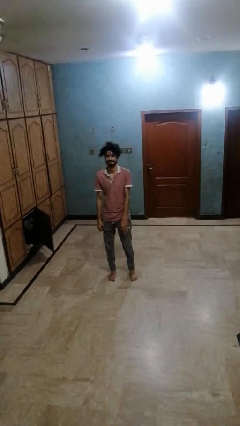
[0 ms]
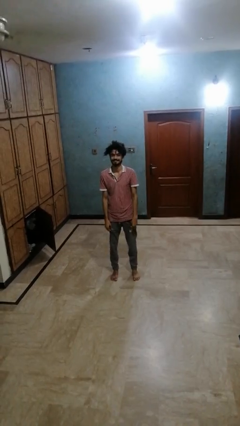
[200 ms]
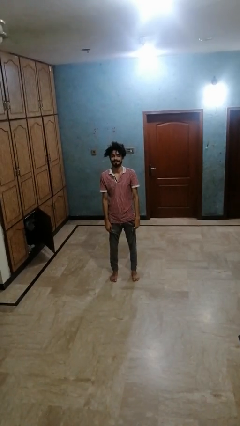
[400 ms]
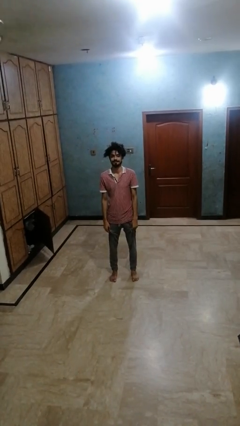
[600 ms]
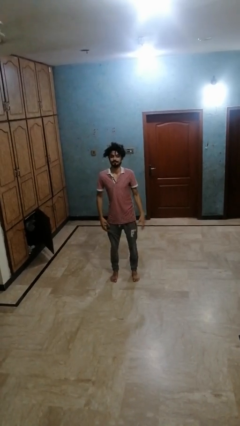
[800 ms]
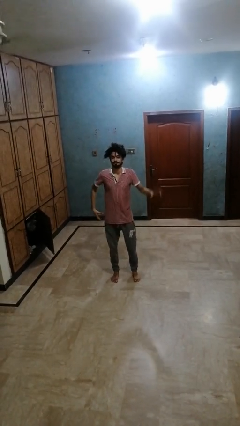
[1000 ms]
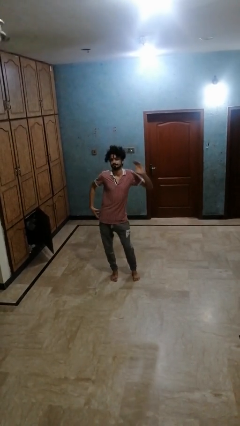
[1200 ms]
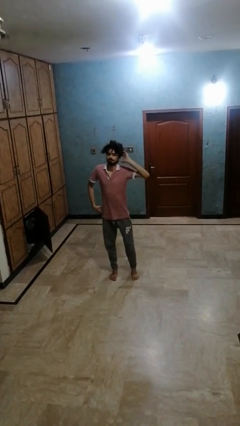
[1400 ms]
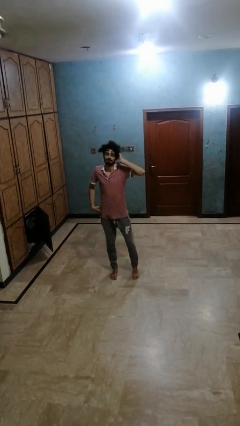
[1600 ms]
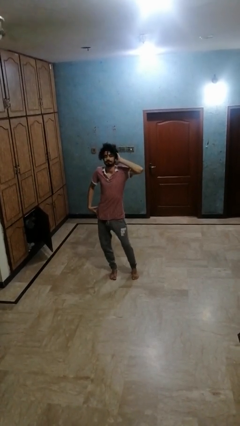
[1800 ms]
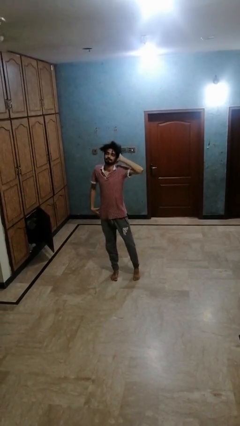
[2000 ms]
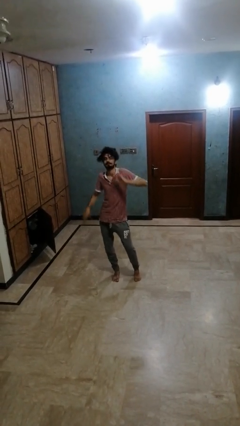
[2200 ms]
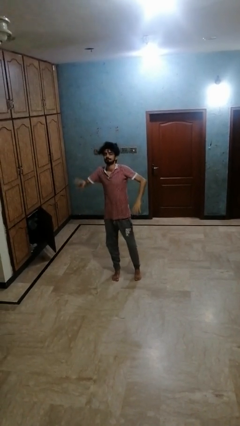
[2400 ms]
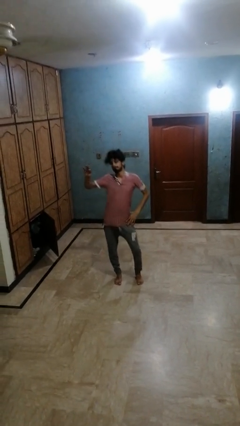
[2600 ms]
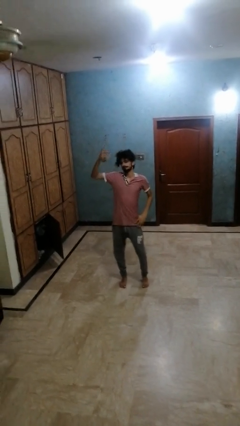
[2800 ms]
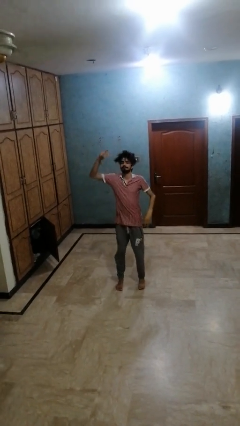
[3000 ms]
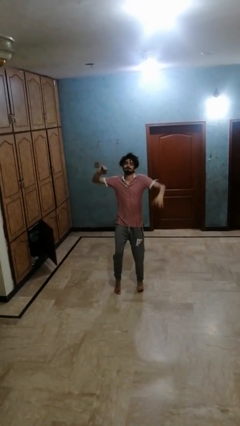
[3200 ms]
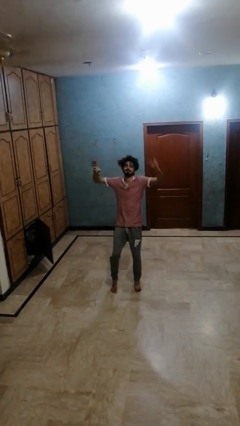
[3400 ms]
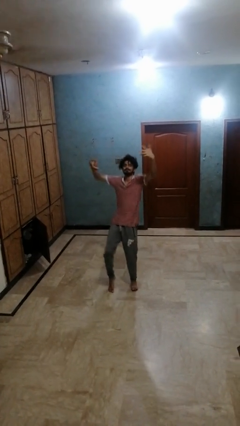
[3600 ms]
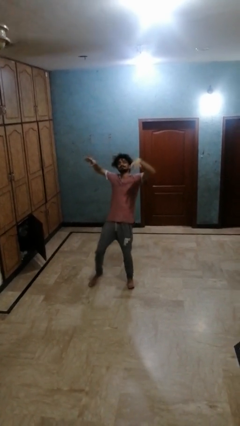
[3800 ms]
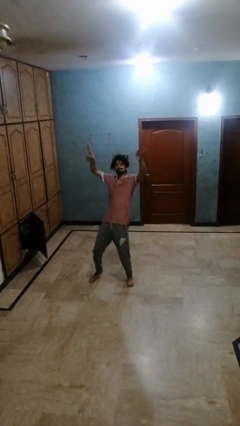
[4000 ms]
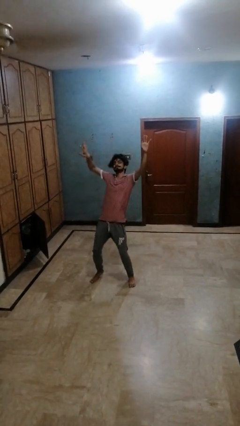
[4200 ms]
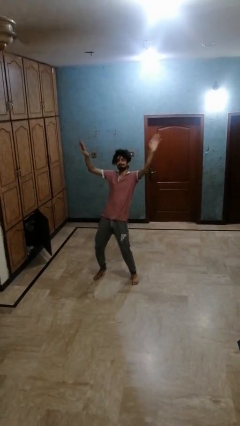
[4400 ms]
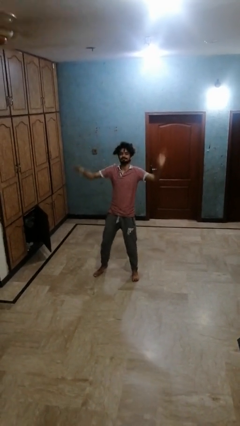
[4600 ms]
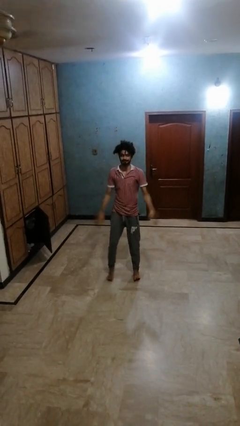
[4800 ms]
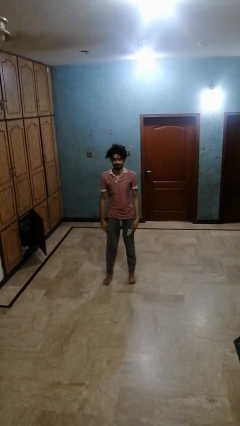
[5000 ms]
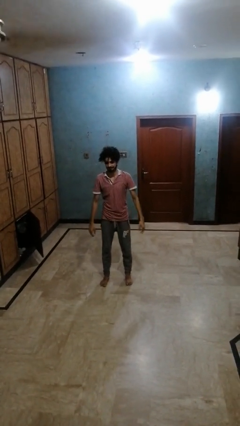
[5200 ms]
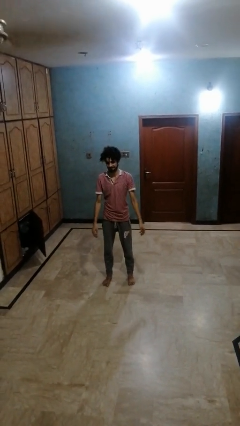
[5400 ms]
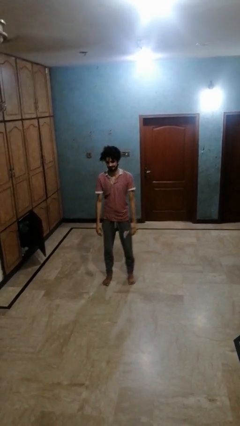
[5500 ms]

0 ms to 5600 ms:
person dances in place

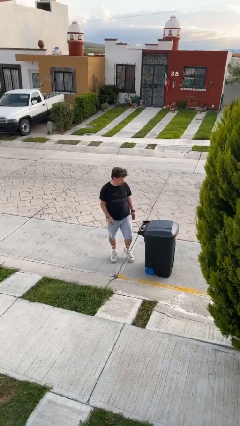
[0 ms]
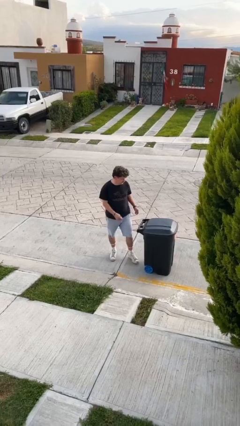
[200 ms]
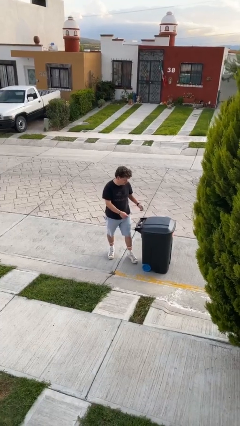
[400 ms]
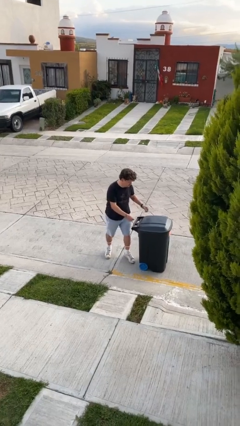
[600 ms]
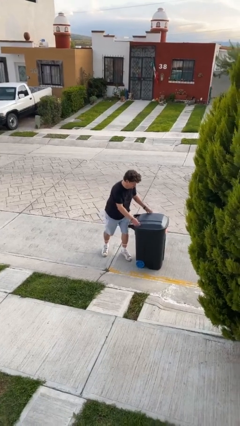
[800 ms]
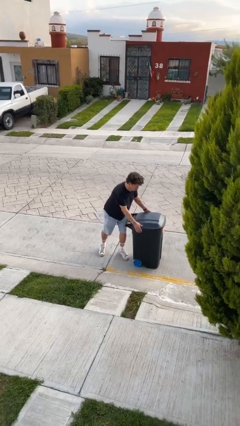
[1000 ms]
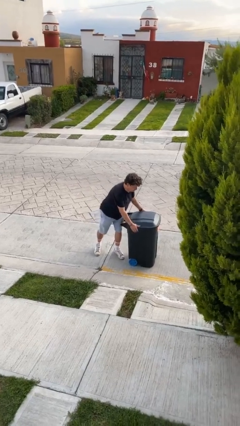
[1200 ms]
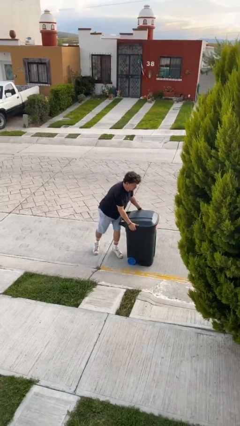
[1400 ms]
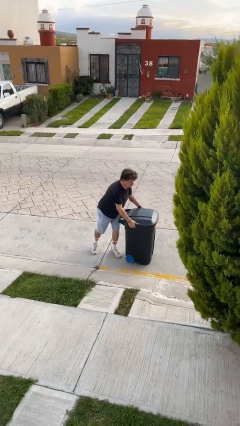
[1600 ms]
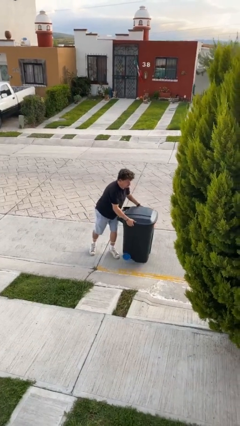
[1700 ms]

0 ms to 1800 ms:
person picks up object from floor

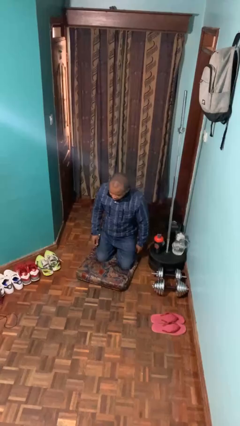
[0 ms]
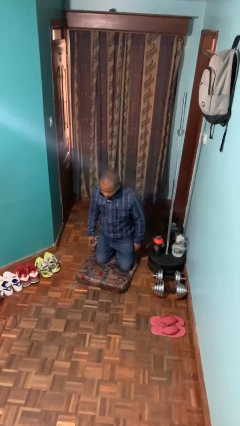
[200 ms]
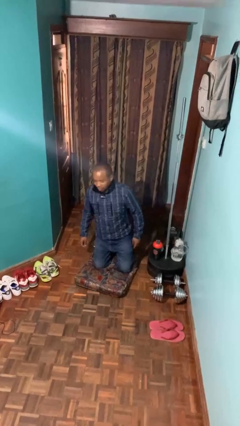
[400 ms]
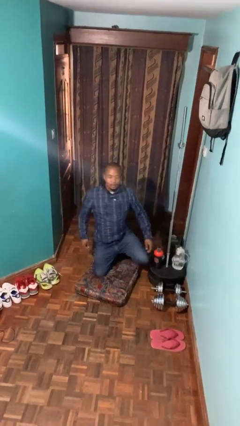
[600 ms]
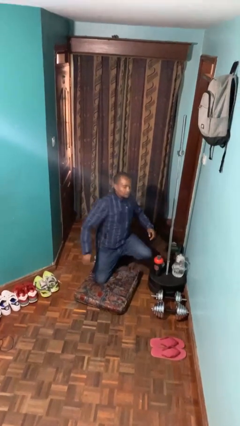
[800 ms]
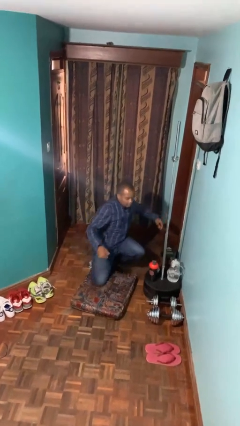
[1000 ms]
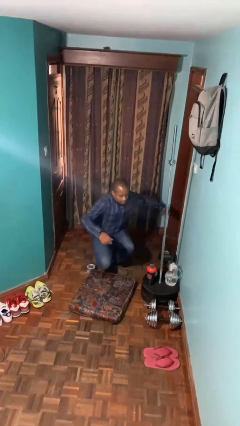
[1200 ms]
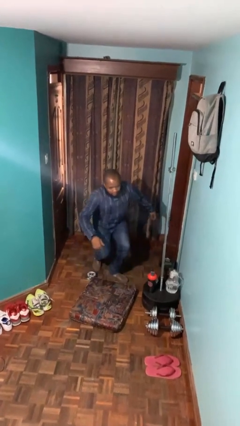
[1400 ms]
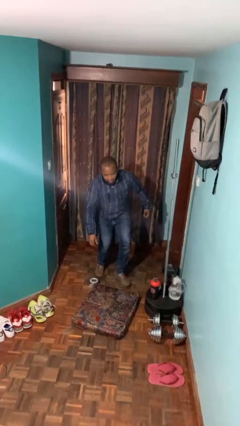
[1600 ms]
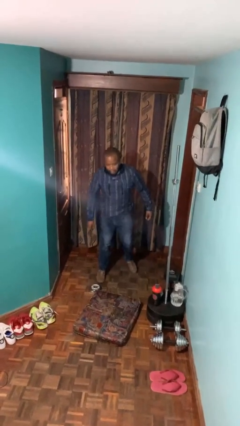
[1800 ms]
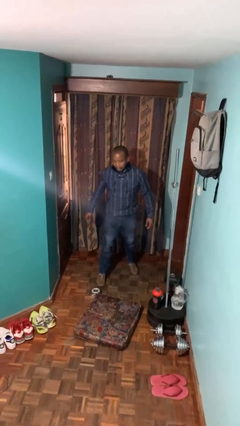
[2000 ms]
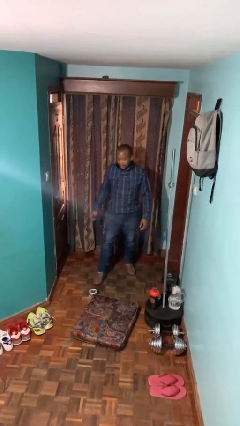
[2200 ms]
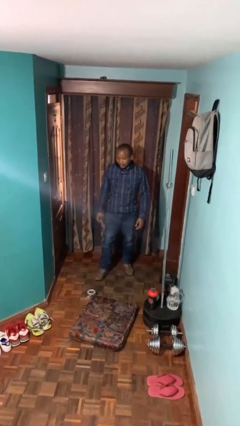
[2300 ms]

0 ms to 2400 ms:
person stands up from floor

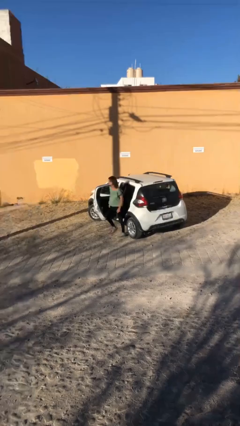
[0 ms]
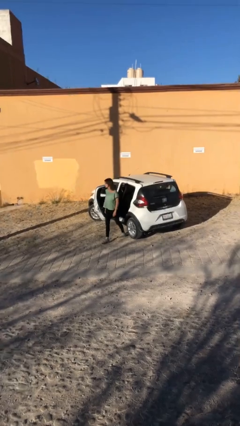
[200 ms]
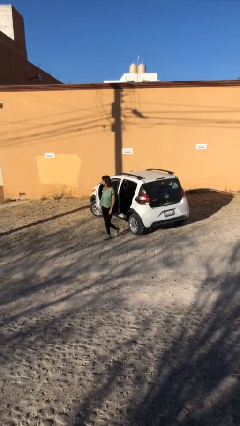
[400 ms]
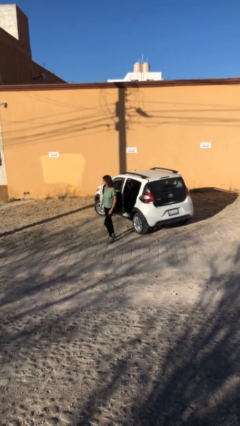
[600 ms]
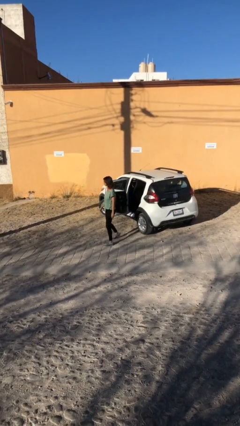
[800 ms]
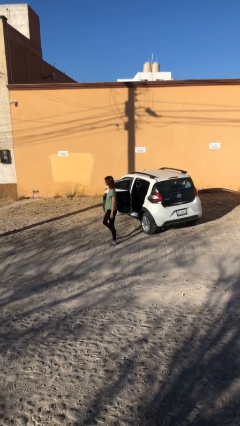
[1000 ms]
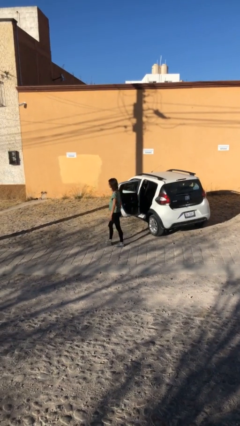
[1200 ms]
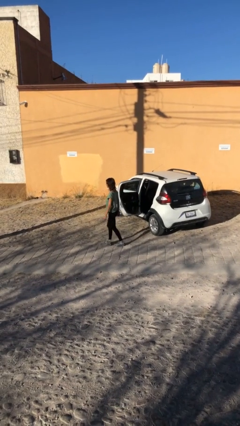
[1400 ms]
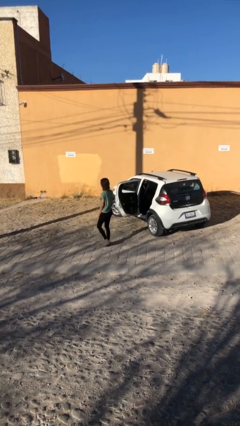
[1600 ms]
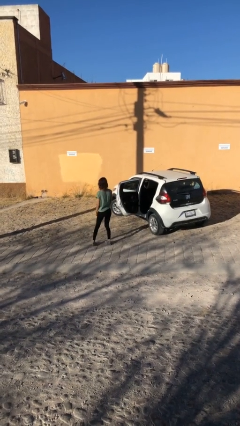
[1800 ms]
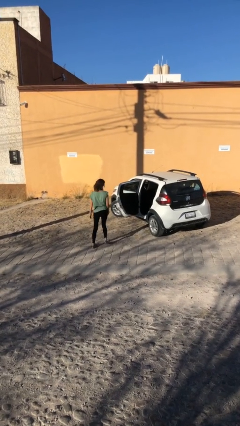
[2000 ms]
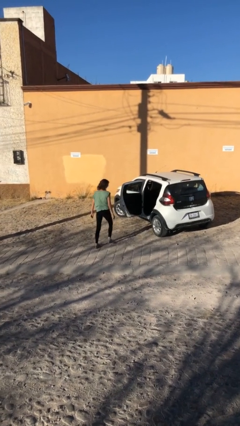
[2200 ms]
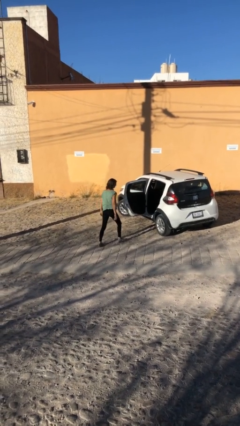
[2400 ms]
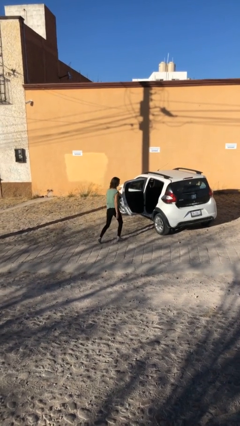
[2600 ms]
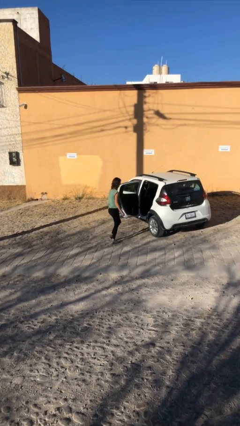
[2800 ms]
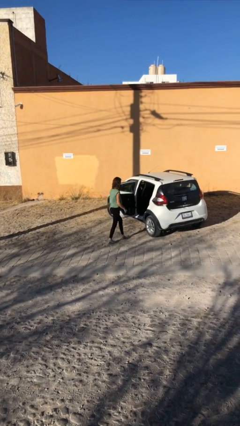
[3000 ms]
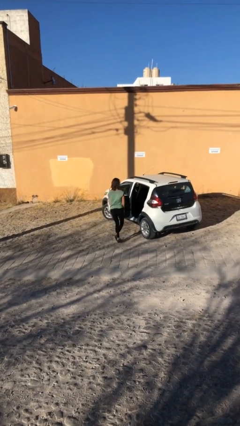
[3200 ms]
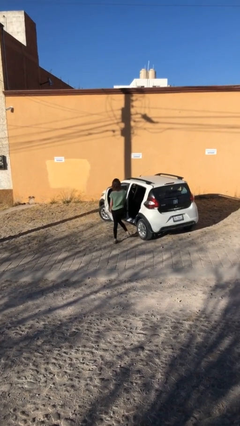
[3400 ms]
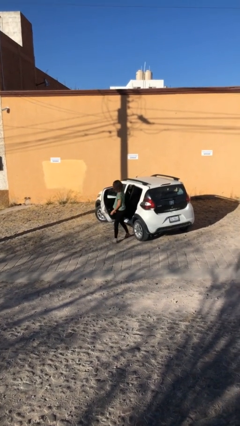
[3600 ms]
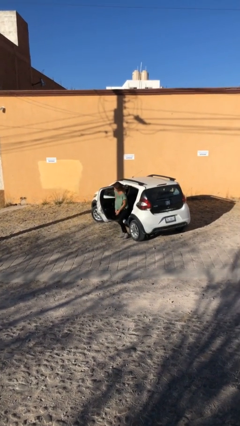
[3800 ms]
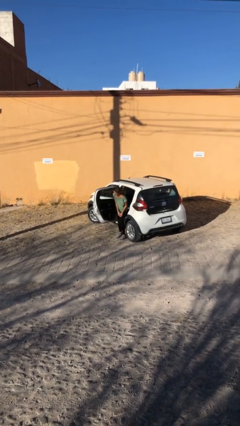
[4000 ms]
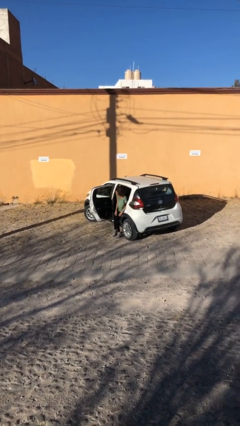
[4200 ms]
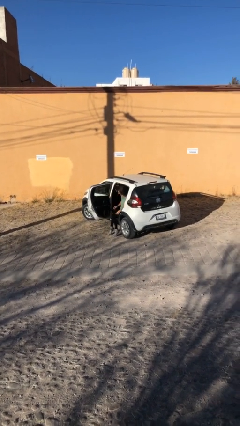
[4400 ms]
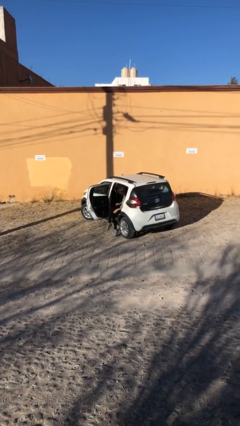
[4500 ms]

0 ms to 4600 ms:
person exits car

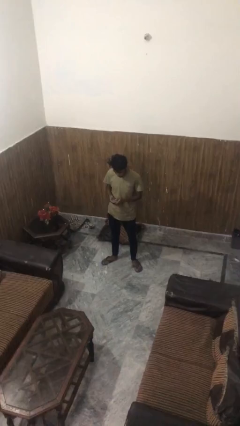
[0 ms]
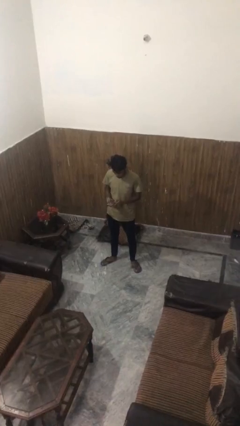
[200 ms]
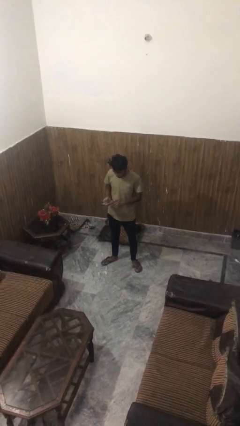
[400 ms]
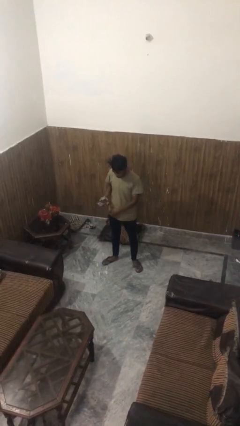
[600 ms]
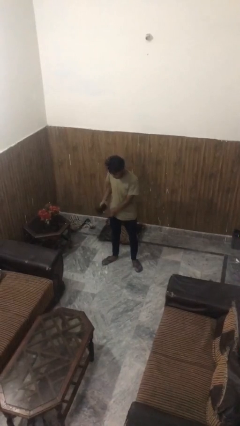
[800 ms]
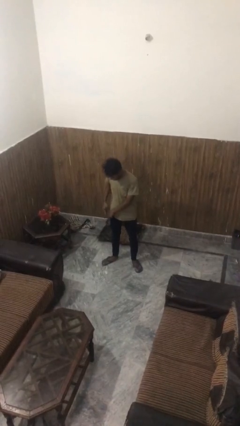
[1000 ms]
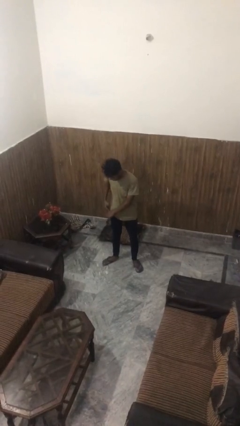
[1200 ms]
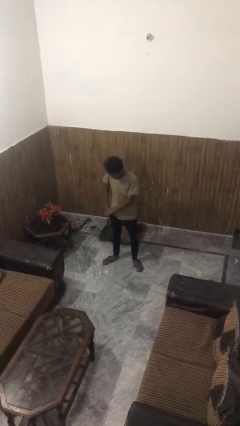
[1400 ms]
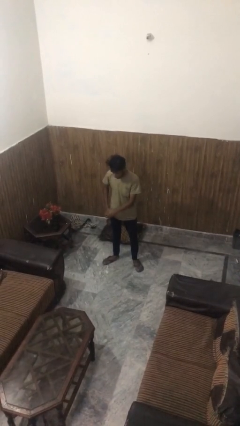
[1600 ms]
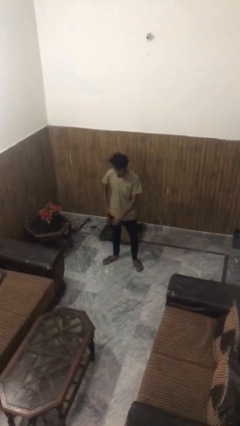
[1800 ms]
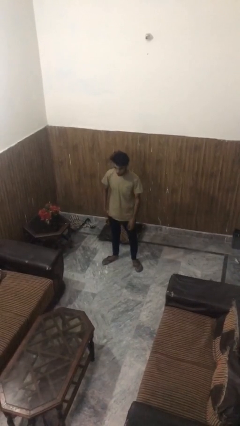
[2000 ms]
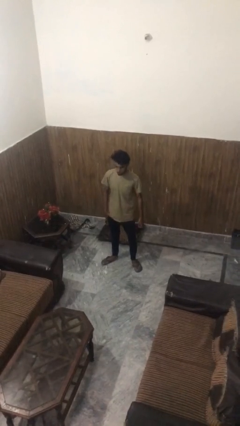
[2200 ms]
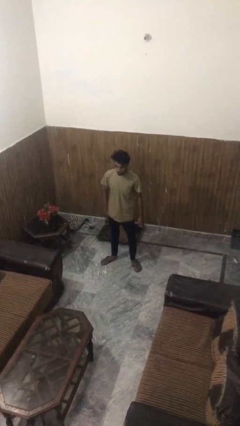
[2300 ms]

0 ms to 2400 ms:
person puts phone into pocket

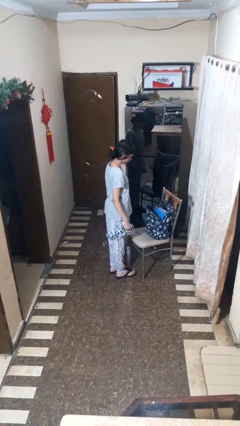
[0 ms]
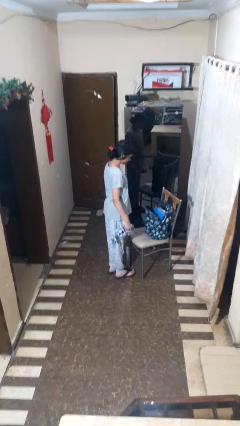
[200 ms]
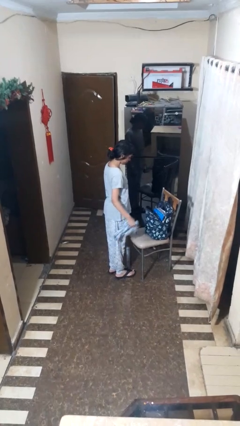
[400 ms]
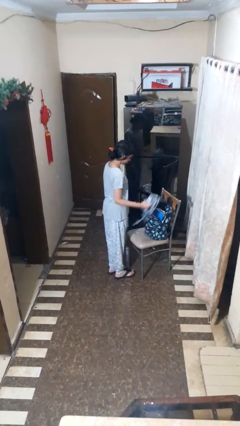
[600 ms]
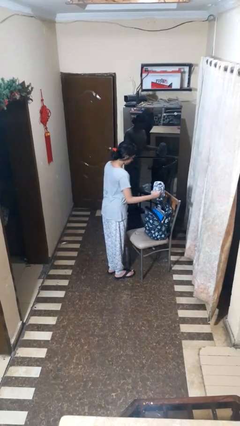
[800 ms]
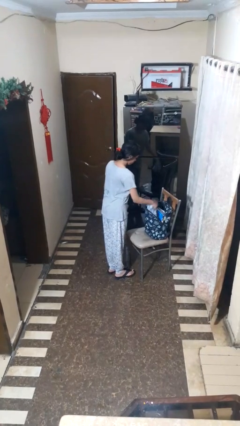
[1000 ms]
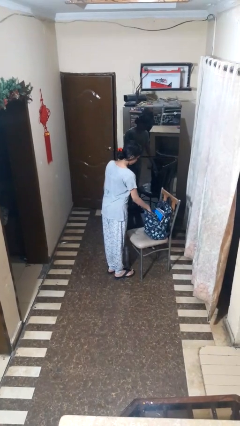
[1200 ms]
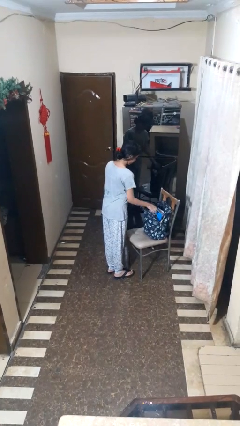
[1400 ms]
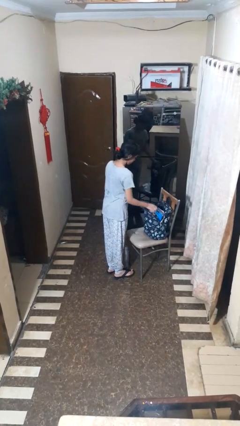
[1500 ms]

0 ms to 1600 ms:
person puts object into bag
